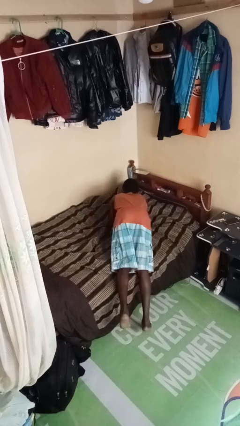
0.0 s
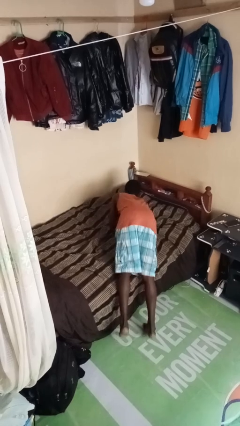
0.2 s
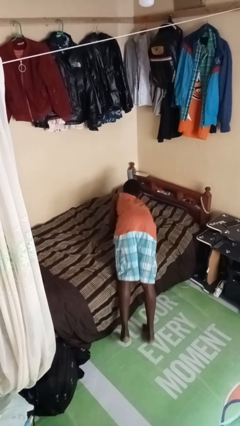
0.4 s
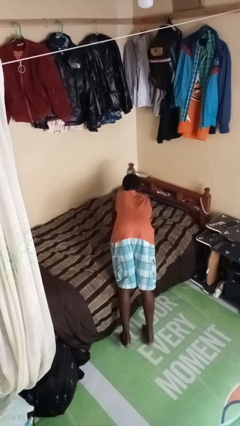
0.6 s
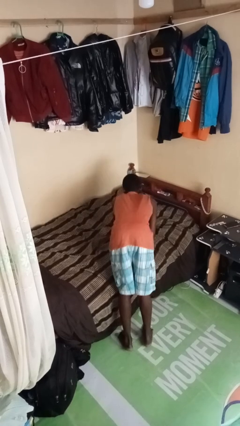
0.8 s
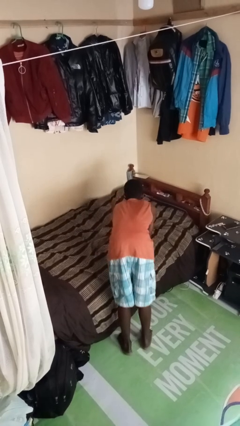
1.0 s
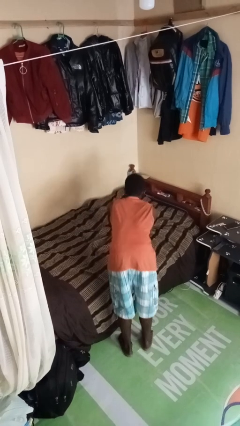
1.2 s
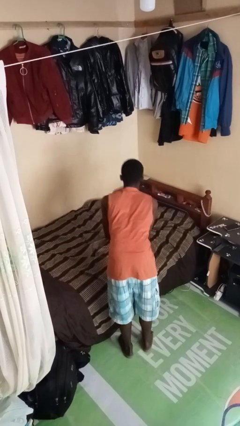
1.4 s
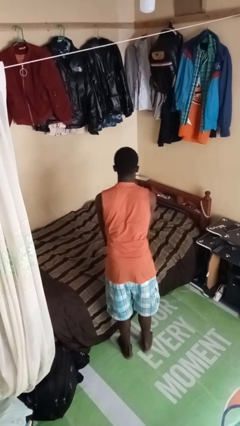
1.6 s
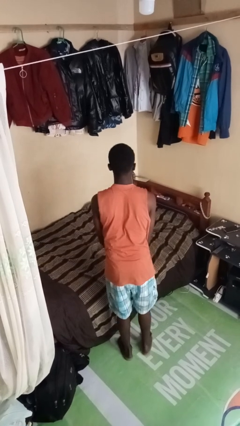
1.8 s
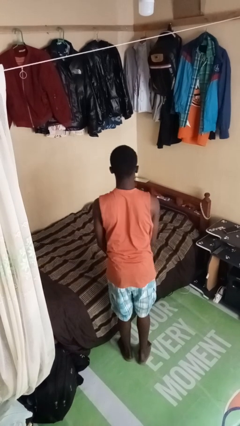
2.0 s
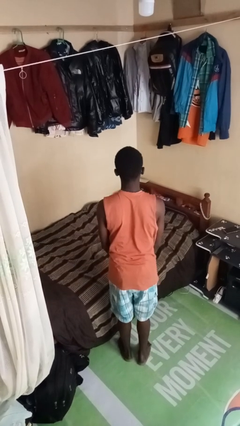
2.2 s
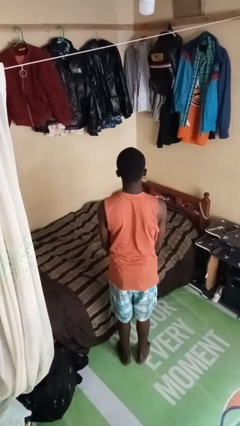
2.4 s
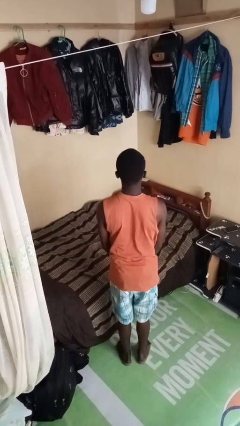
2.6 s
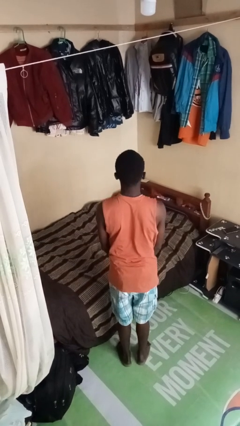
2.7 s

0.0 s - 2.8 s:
person stands up

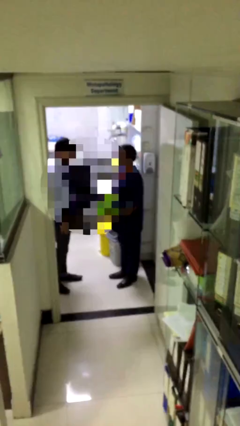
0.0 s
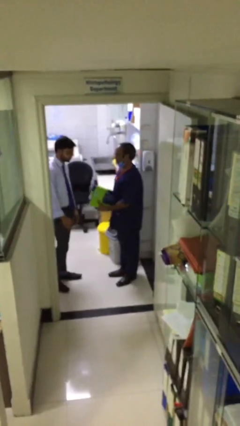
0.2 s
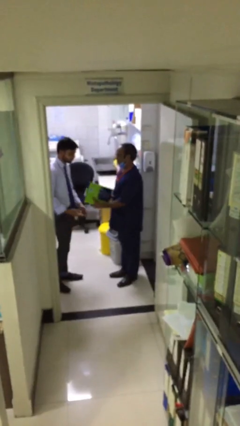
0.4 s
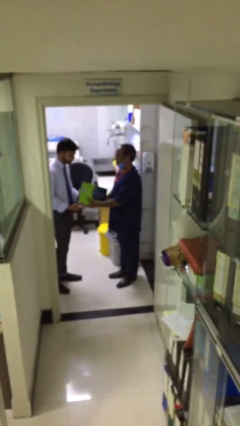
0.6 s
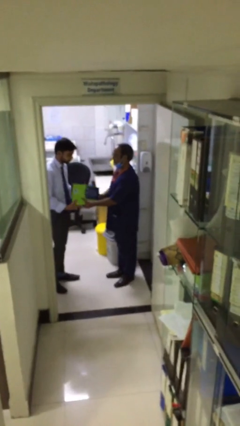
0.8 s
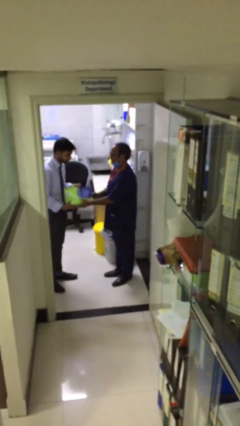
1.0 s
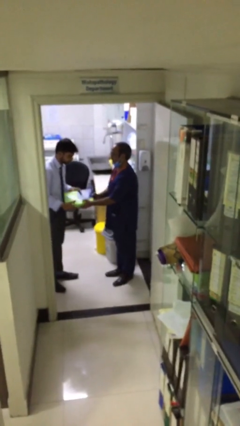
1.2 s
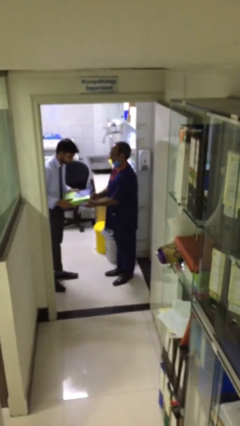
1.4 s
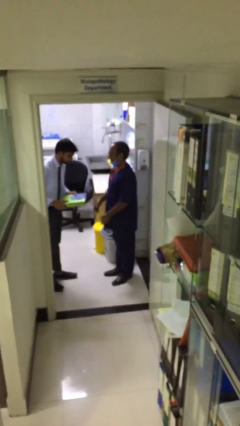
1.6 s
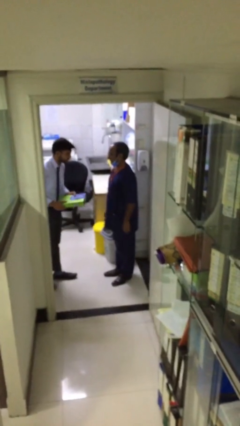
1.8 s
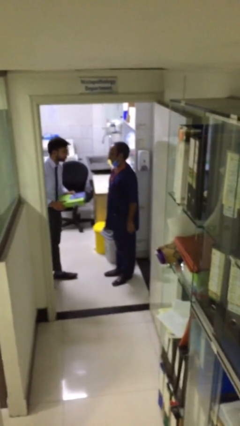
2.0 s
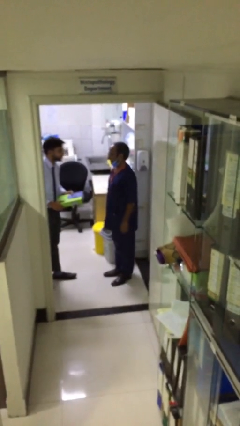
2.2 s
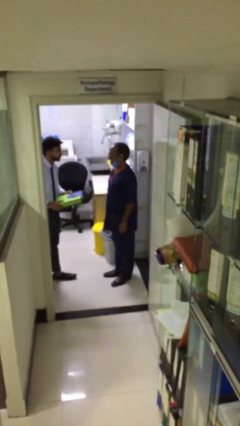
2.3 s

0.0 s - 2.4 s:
person transfers object to person

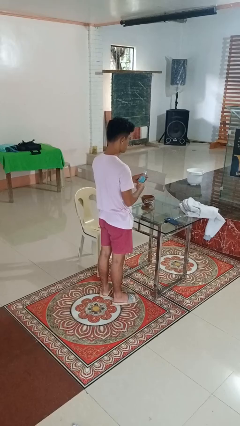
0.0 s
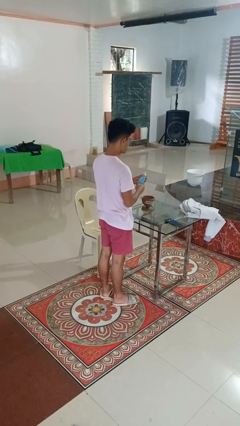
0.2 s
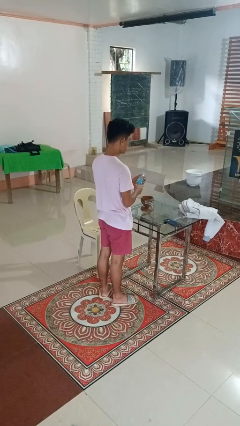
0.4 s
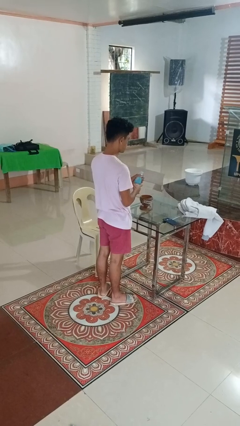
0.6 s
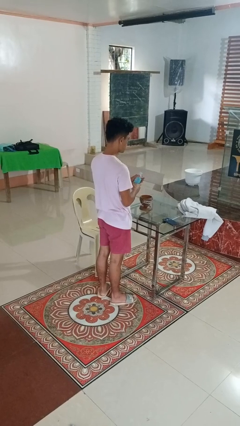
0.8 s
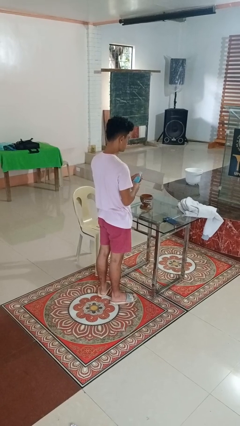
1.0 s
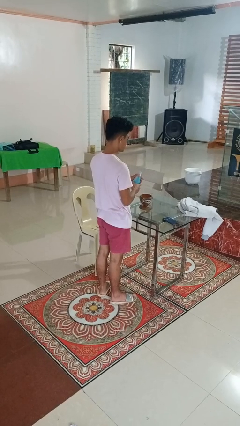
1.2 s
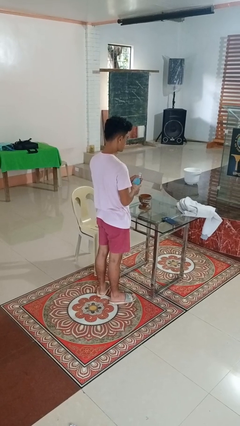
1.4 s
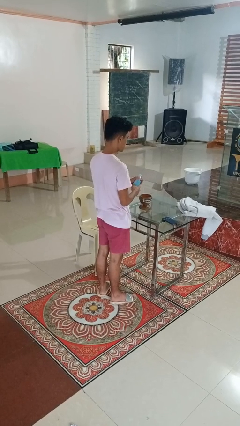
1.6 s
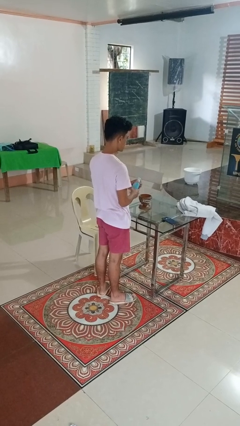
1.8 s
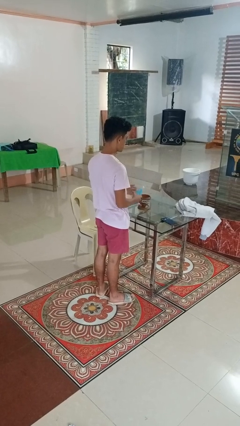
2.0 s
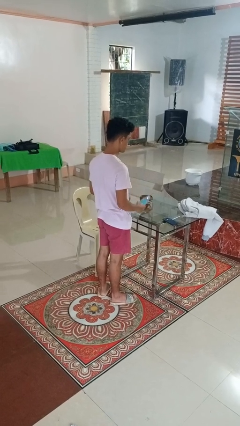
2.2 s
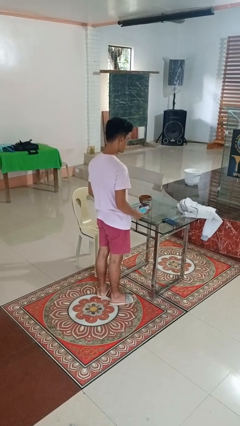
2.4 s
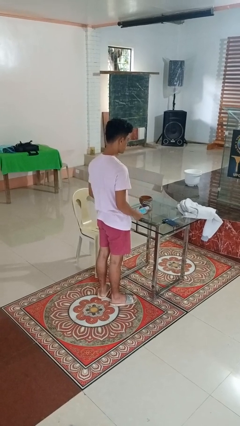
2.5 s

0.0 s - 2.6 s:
person squeezes object

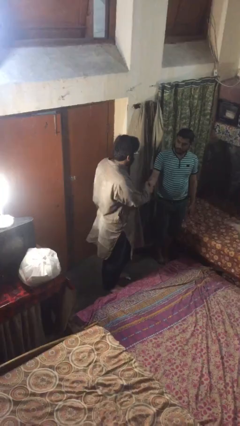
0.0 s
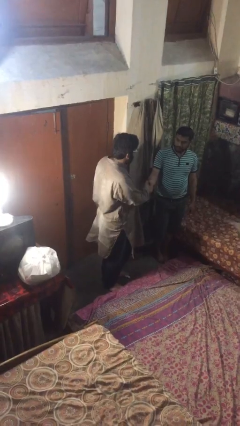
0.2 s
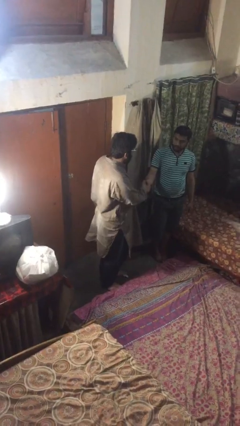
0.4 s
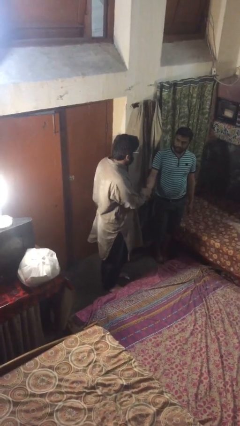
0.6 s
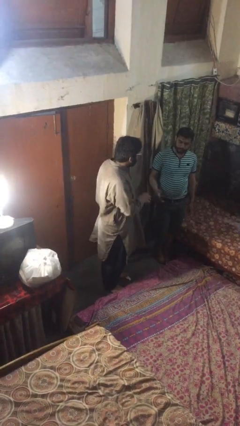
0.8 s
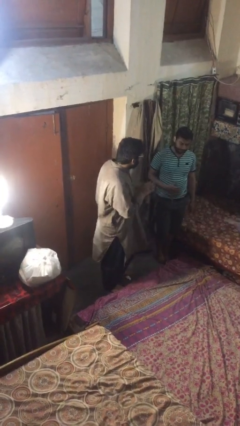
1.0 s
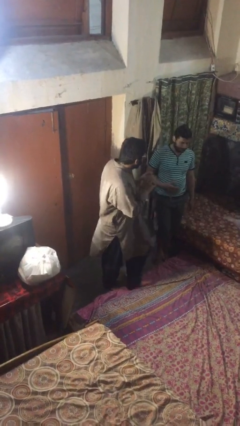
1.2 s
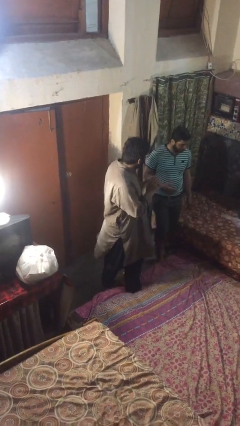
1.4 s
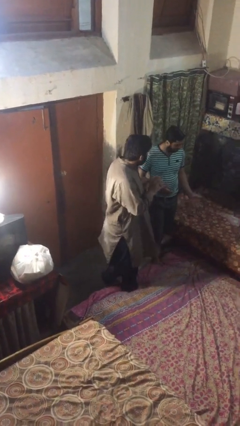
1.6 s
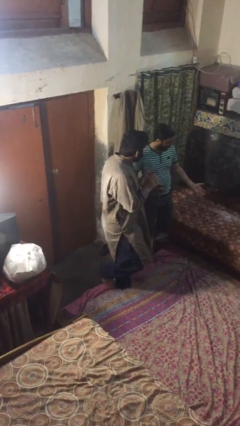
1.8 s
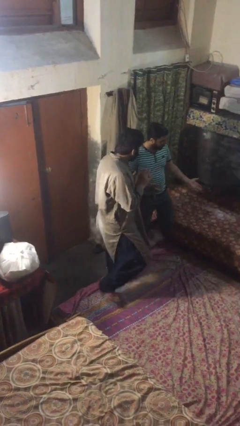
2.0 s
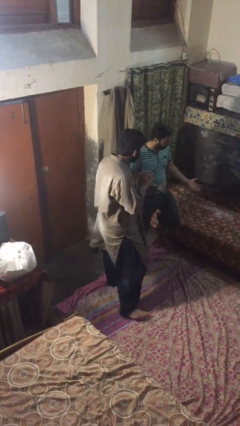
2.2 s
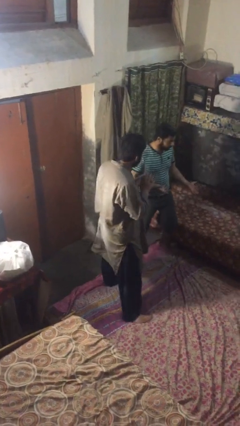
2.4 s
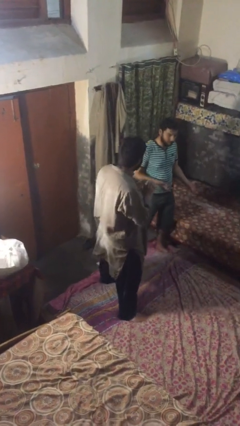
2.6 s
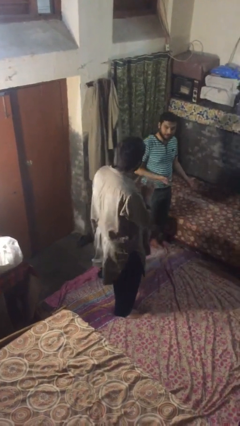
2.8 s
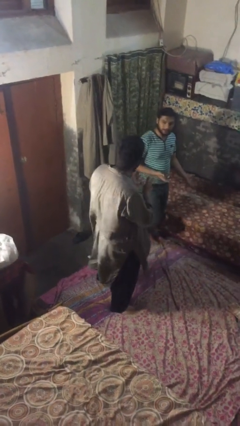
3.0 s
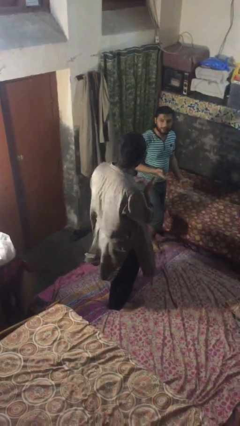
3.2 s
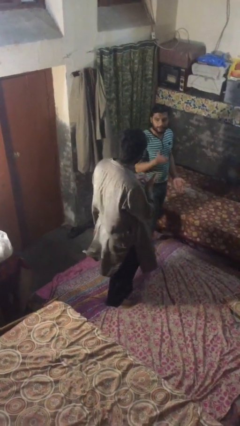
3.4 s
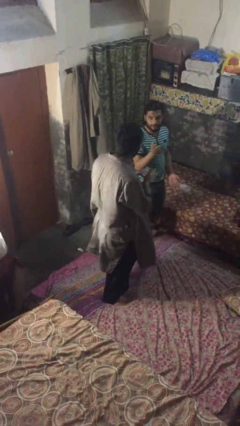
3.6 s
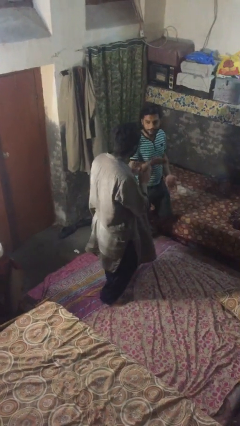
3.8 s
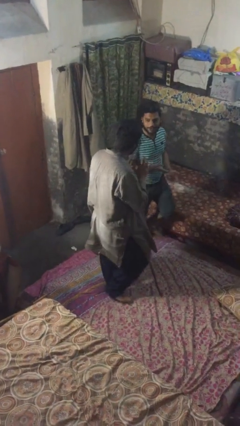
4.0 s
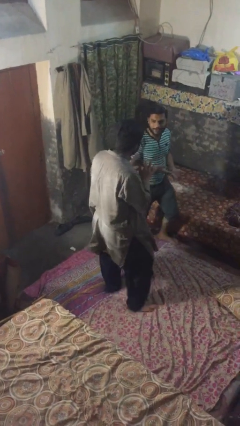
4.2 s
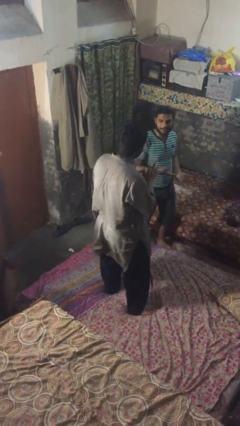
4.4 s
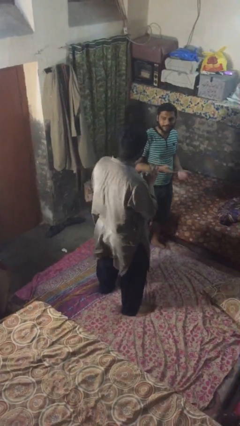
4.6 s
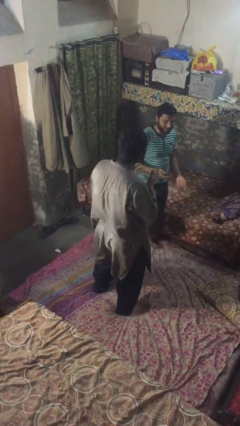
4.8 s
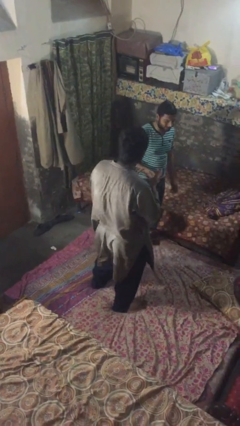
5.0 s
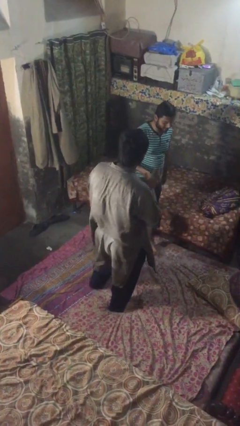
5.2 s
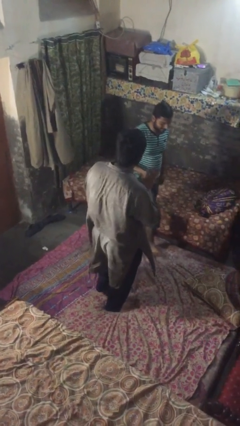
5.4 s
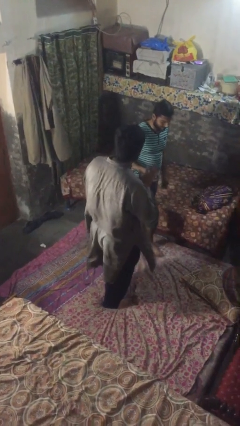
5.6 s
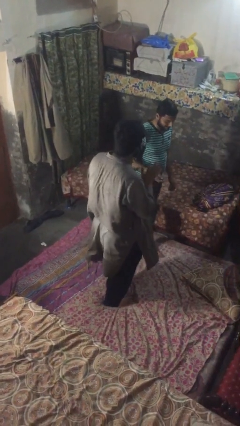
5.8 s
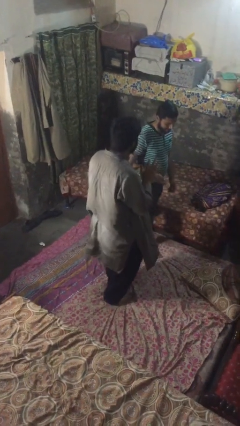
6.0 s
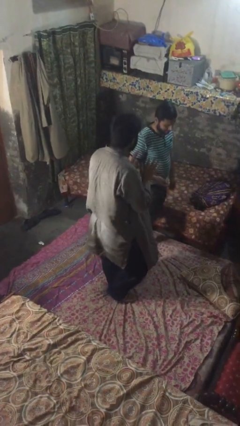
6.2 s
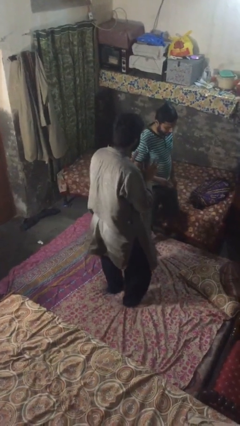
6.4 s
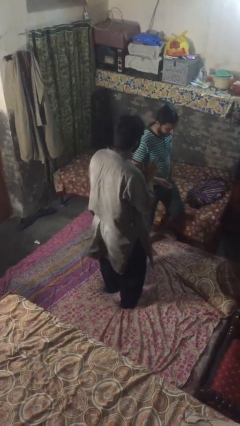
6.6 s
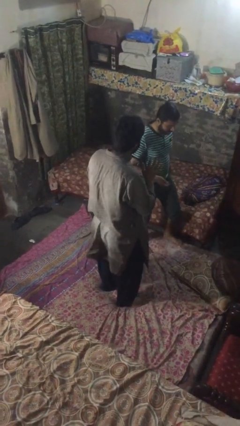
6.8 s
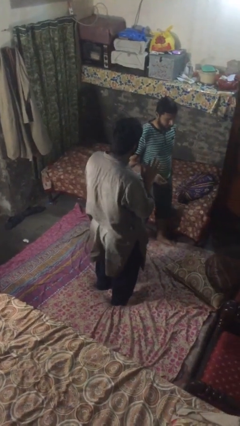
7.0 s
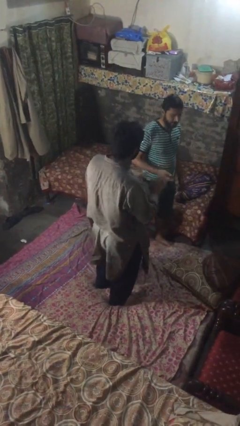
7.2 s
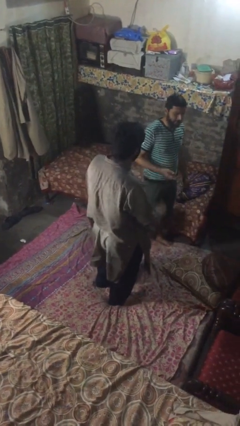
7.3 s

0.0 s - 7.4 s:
person talks to person

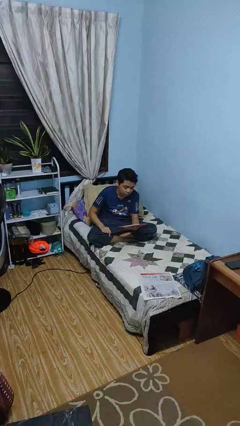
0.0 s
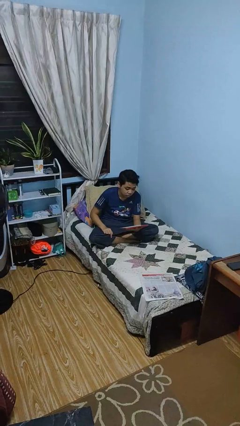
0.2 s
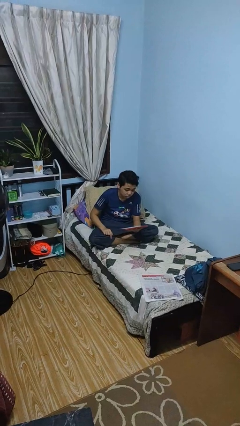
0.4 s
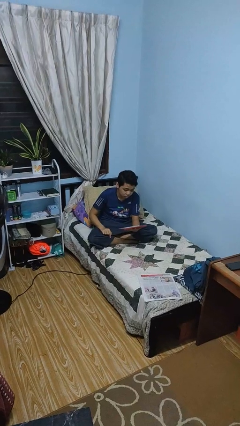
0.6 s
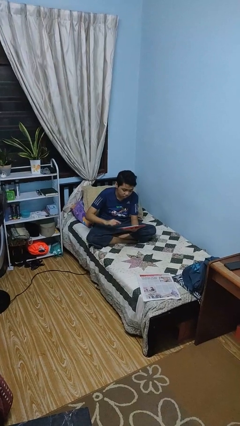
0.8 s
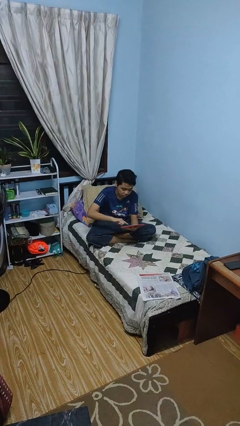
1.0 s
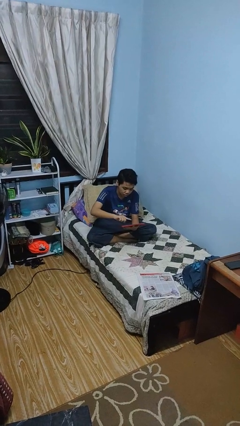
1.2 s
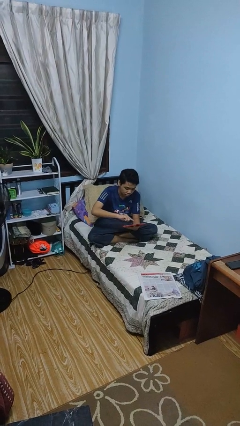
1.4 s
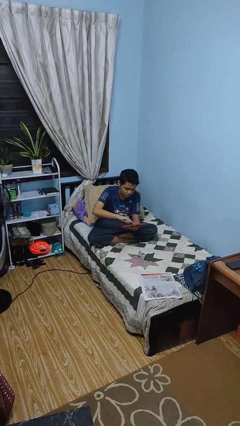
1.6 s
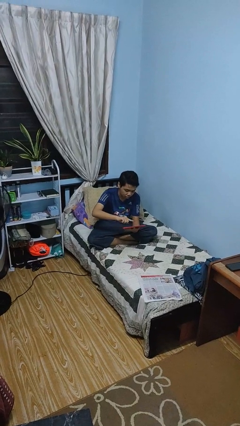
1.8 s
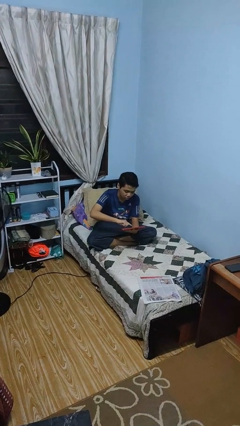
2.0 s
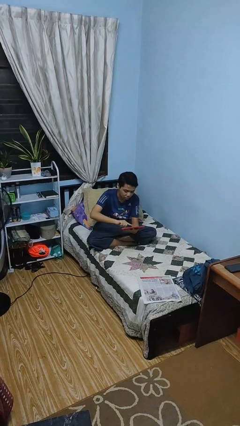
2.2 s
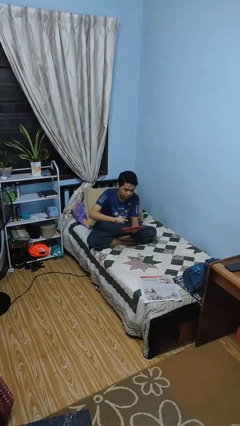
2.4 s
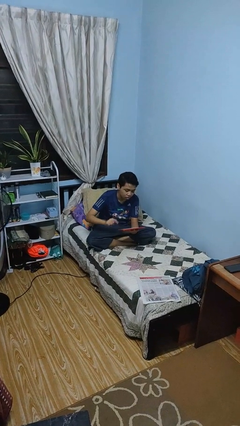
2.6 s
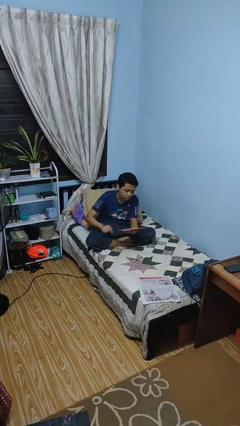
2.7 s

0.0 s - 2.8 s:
person interacts with tablet
